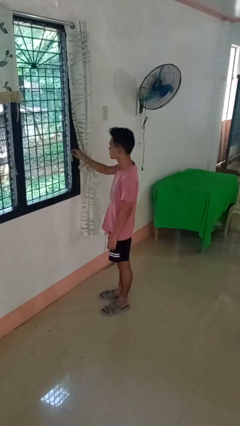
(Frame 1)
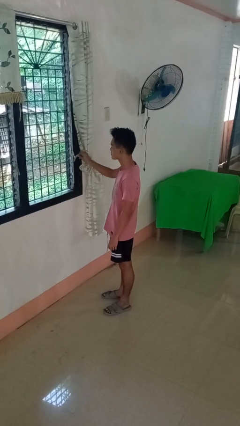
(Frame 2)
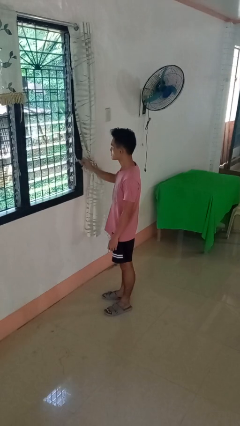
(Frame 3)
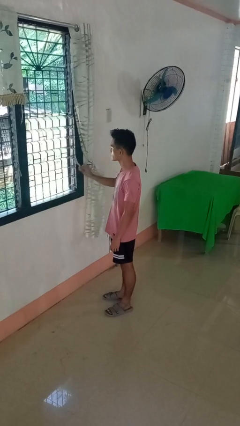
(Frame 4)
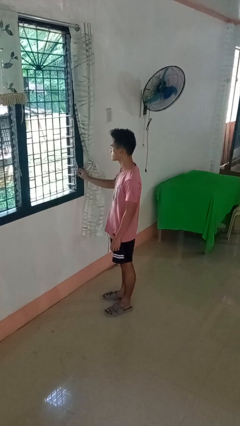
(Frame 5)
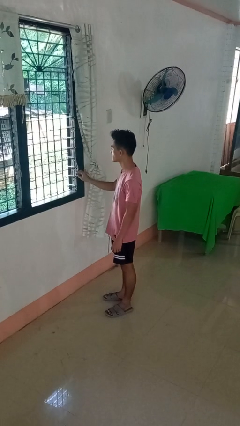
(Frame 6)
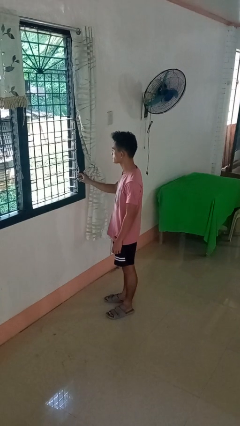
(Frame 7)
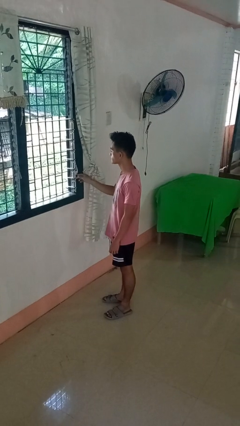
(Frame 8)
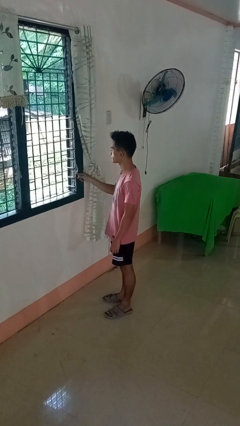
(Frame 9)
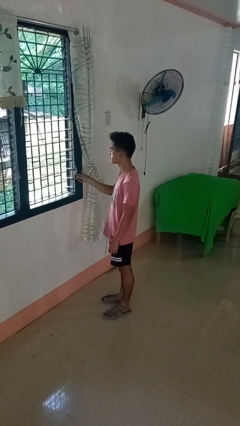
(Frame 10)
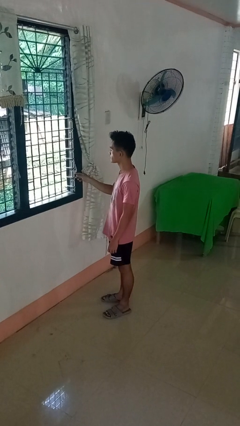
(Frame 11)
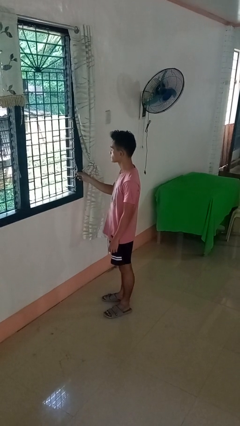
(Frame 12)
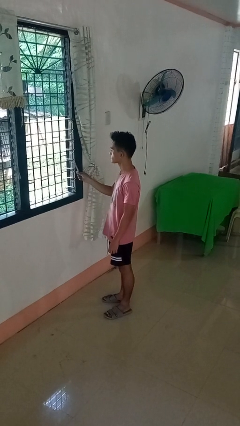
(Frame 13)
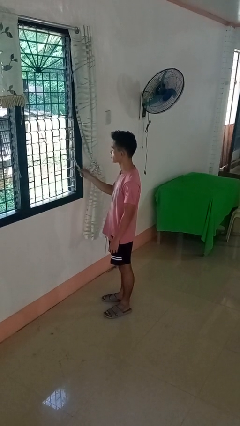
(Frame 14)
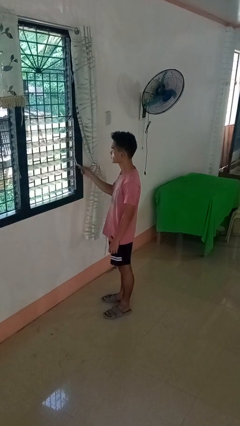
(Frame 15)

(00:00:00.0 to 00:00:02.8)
person opens home window

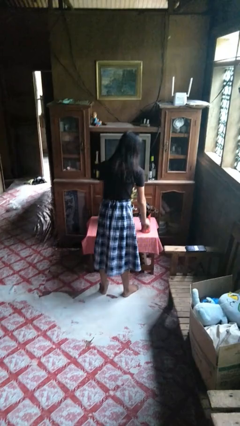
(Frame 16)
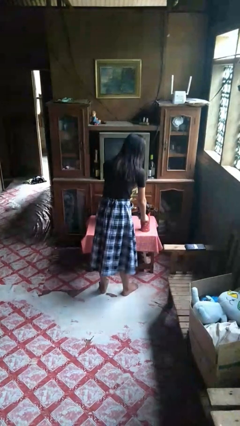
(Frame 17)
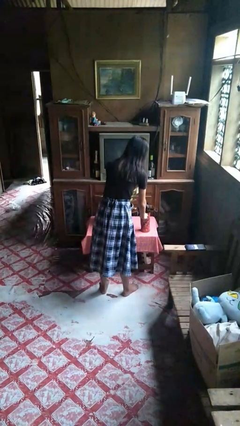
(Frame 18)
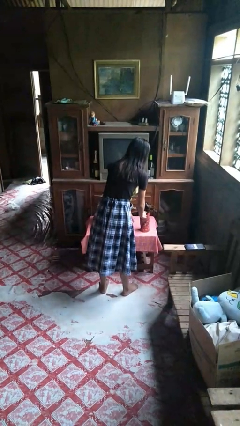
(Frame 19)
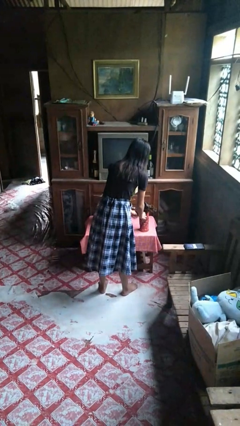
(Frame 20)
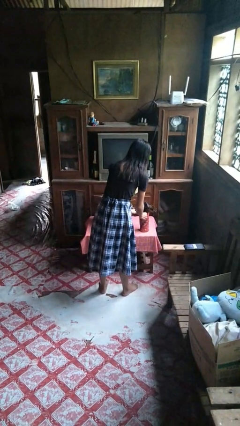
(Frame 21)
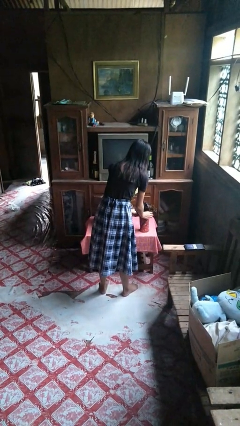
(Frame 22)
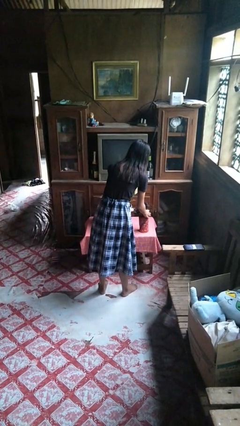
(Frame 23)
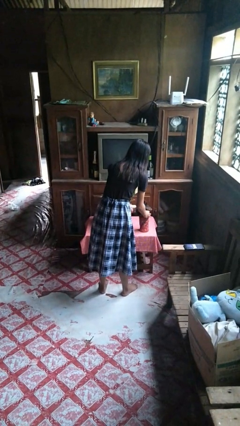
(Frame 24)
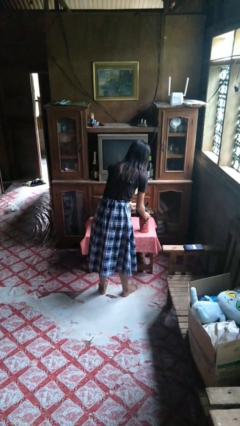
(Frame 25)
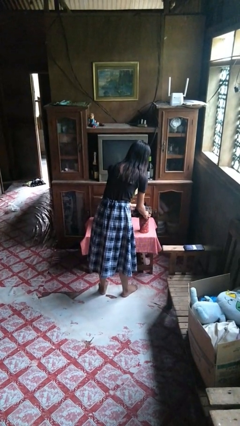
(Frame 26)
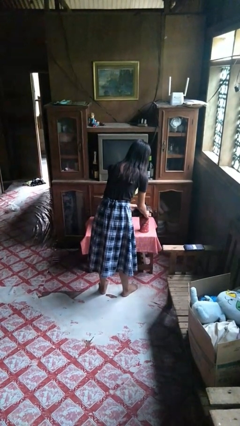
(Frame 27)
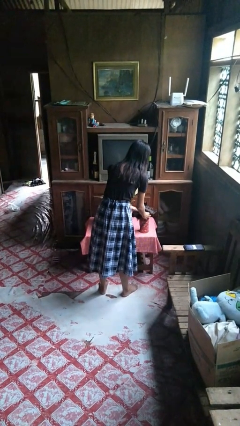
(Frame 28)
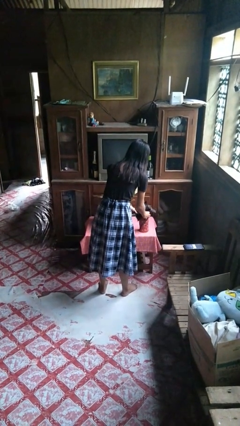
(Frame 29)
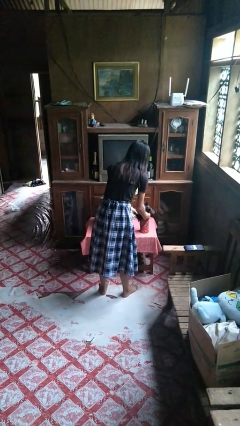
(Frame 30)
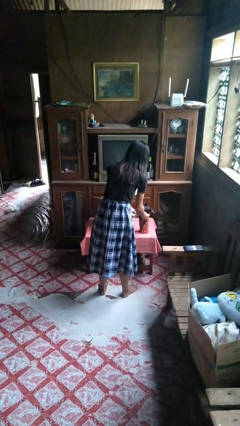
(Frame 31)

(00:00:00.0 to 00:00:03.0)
person arranges flowers in vase

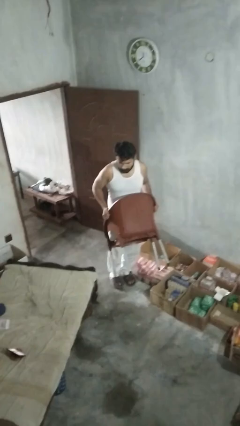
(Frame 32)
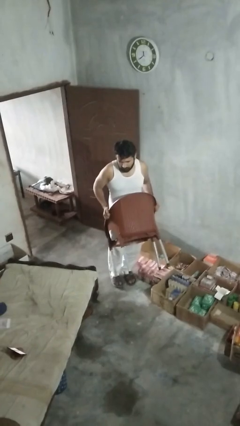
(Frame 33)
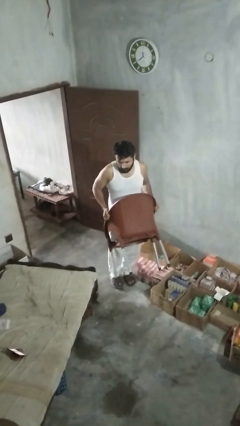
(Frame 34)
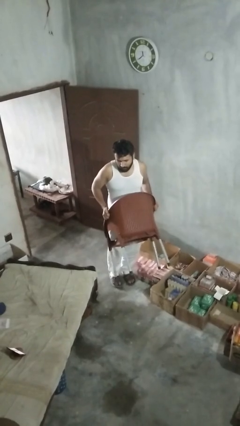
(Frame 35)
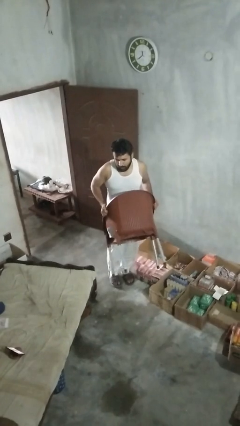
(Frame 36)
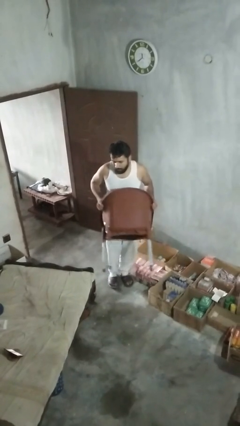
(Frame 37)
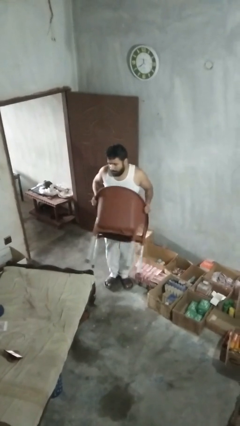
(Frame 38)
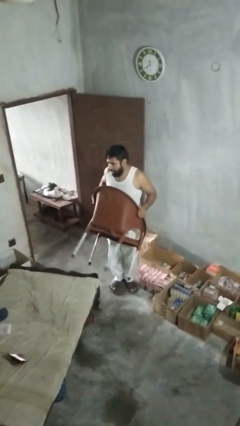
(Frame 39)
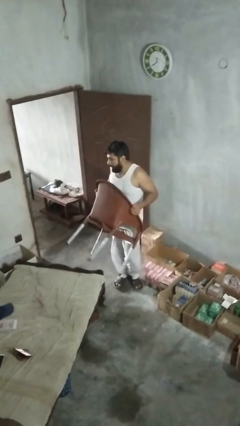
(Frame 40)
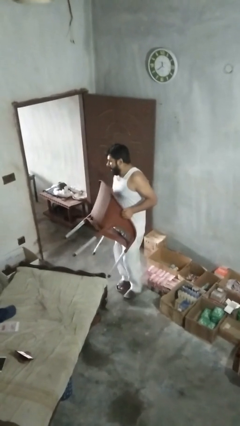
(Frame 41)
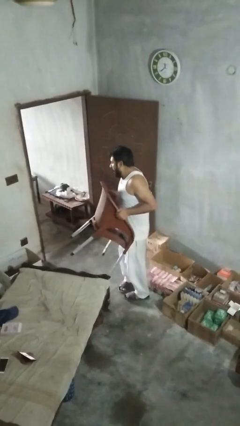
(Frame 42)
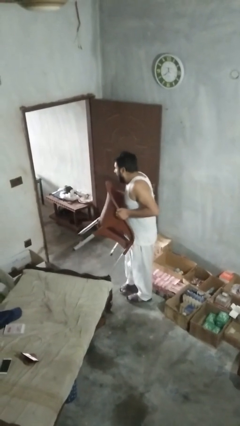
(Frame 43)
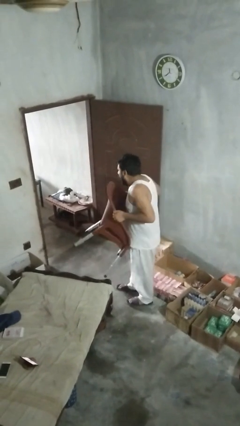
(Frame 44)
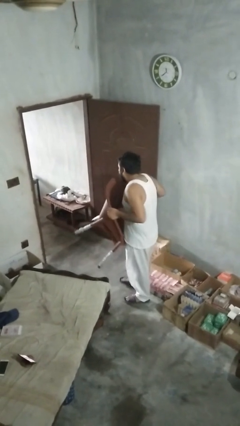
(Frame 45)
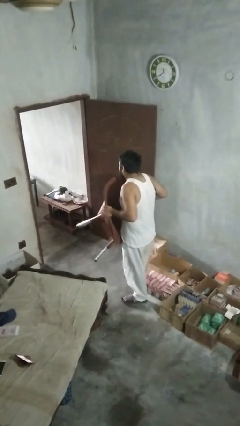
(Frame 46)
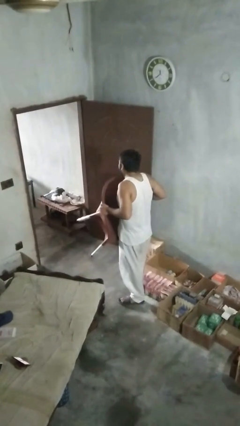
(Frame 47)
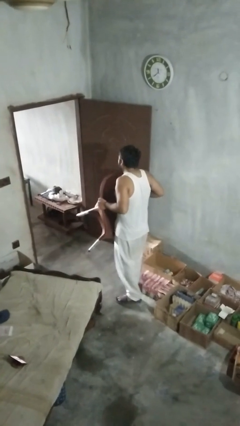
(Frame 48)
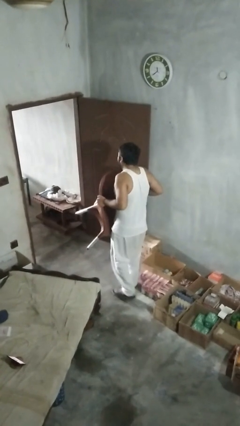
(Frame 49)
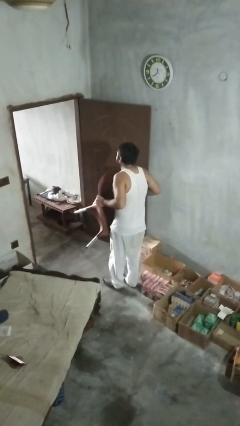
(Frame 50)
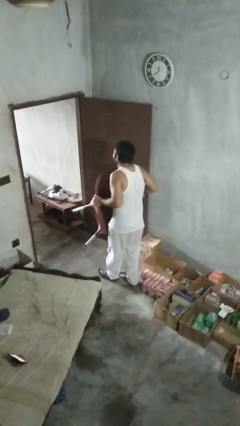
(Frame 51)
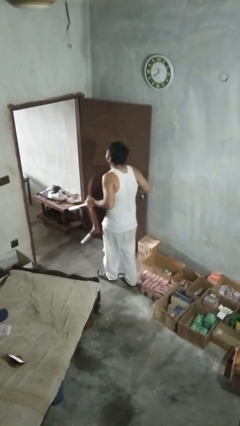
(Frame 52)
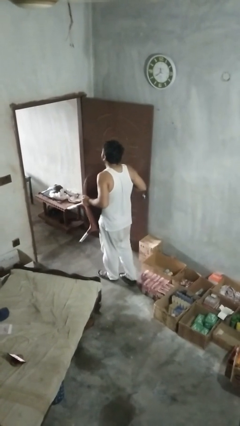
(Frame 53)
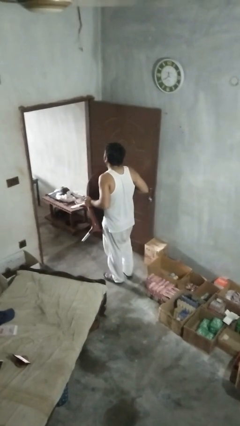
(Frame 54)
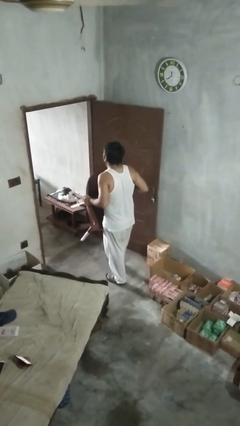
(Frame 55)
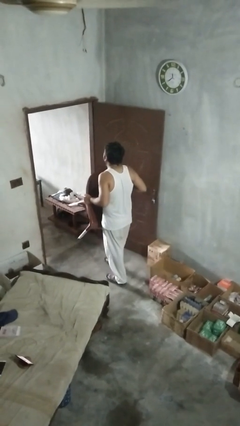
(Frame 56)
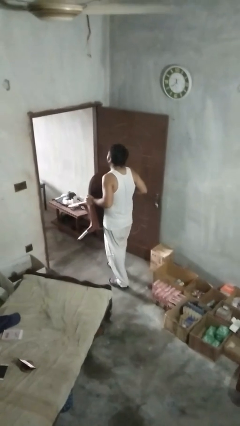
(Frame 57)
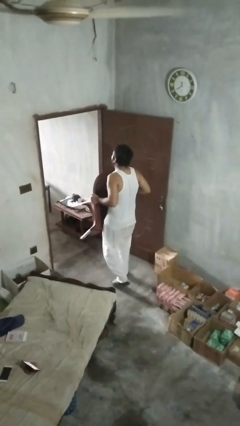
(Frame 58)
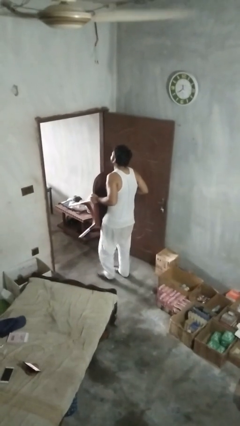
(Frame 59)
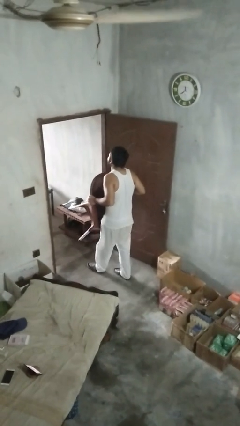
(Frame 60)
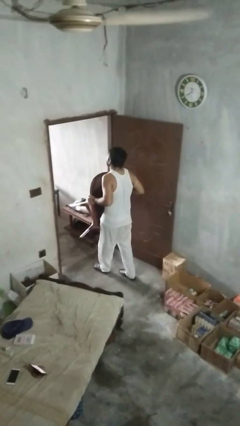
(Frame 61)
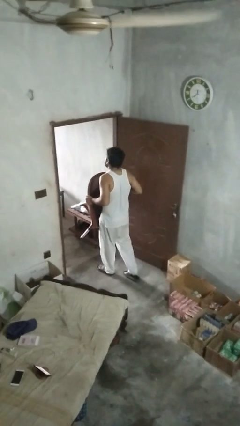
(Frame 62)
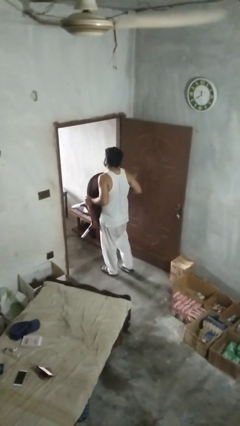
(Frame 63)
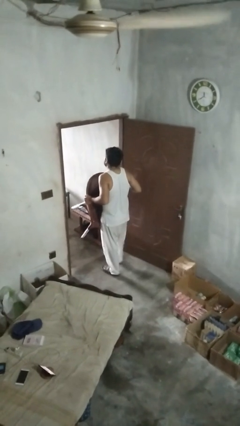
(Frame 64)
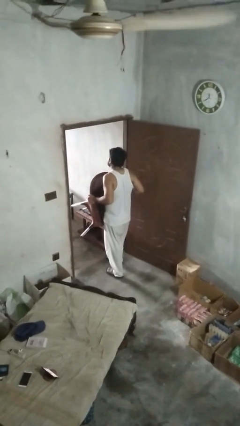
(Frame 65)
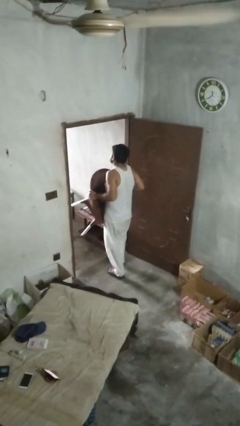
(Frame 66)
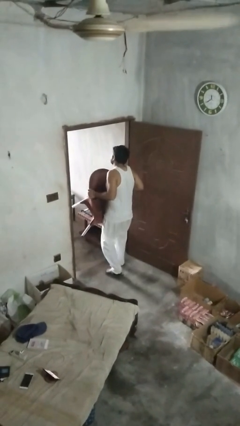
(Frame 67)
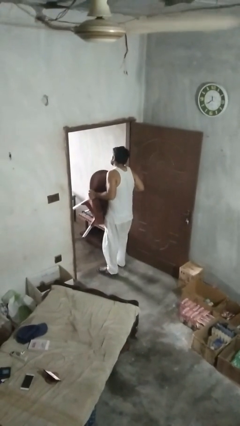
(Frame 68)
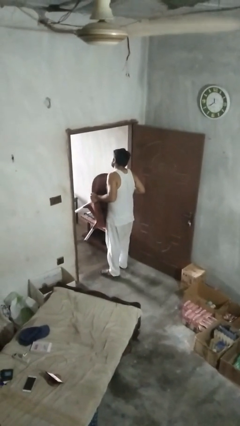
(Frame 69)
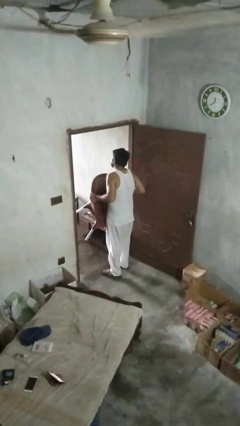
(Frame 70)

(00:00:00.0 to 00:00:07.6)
person carries furniture

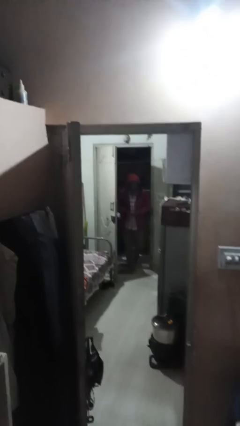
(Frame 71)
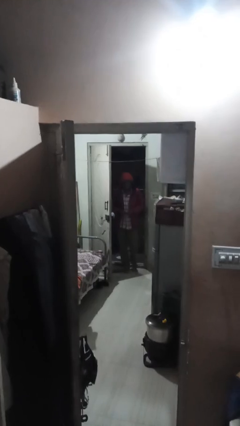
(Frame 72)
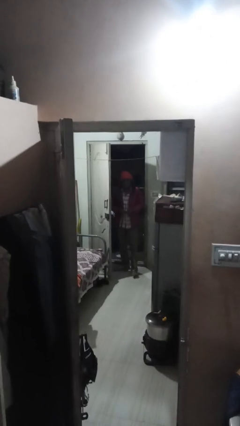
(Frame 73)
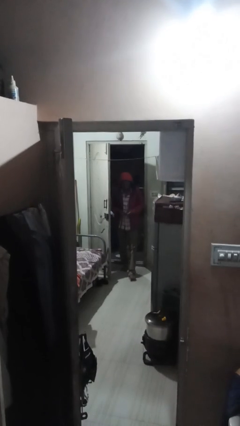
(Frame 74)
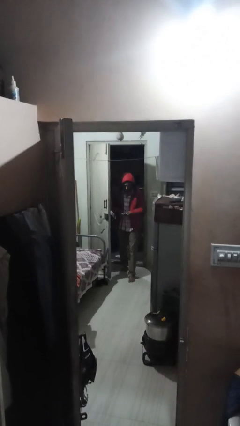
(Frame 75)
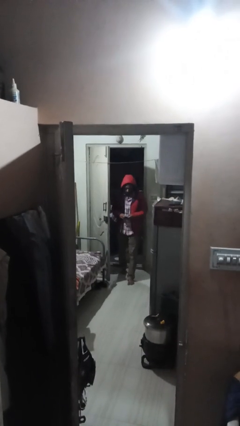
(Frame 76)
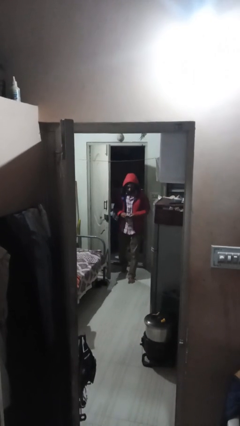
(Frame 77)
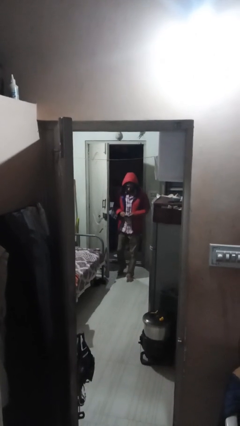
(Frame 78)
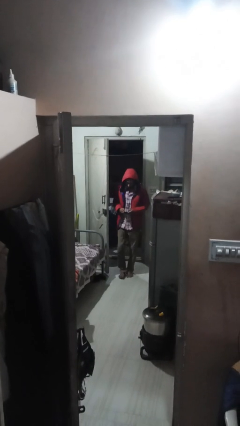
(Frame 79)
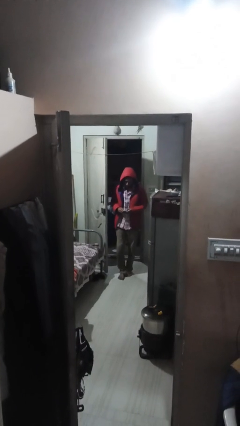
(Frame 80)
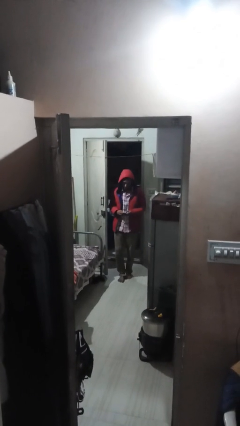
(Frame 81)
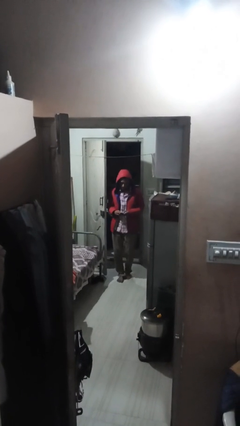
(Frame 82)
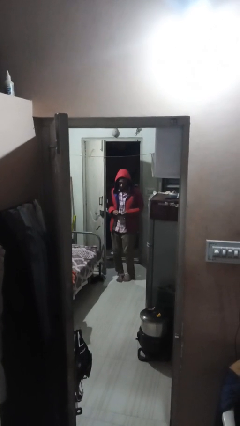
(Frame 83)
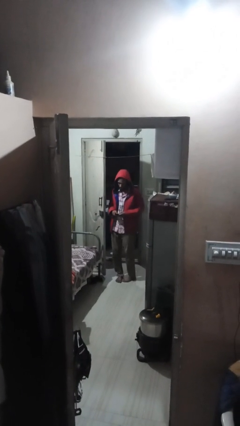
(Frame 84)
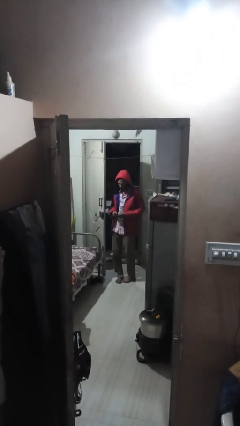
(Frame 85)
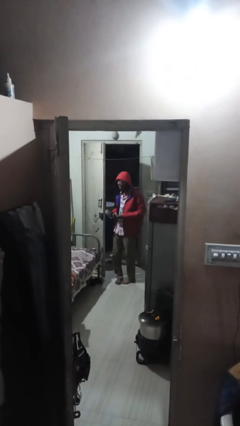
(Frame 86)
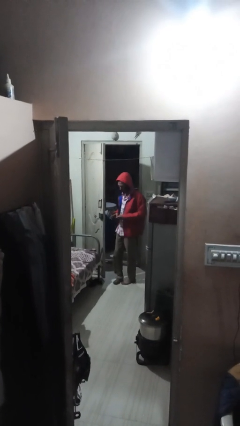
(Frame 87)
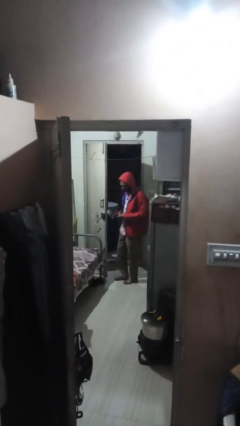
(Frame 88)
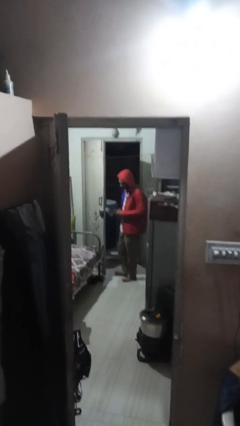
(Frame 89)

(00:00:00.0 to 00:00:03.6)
person enters scene through structure

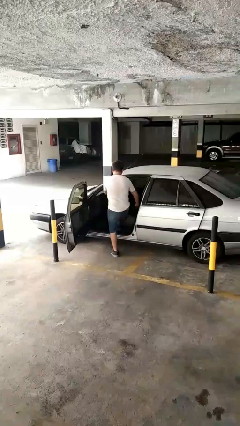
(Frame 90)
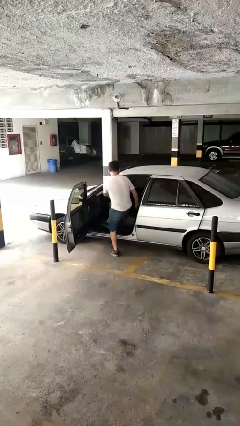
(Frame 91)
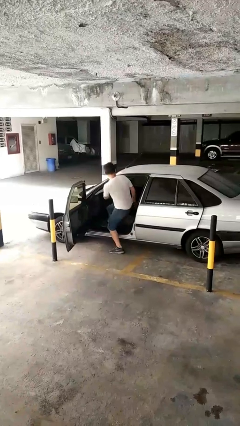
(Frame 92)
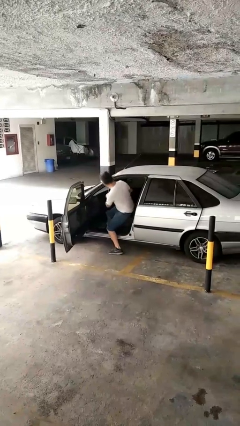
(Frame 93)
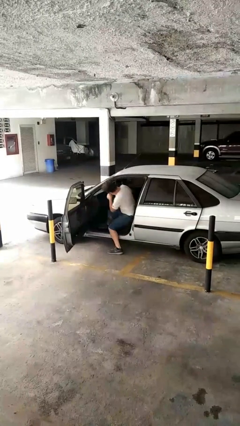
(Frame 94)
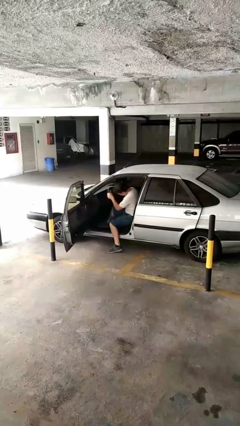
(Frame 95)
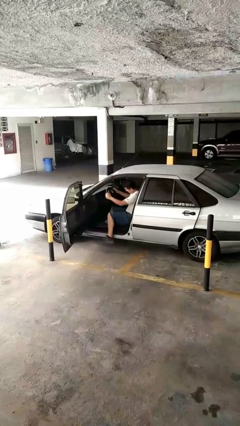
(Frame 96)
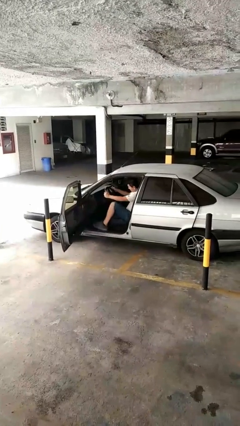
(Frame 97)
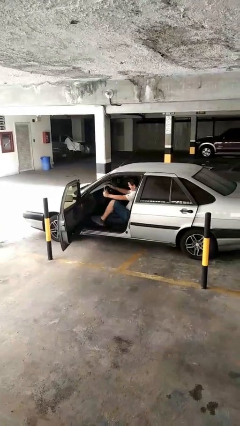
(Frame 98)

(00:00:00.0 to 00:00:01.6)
person enters car
